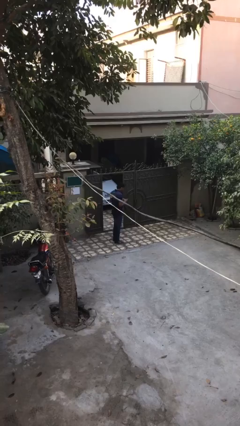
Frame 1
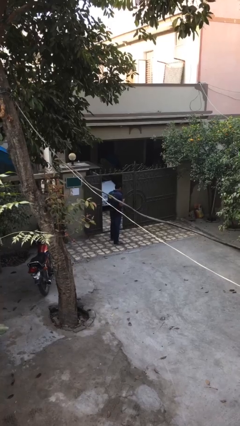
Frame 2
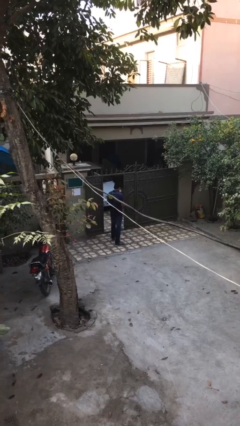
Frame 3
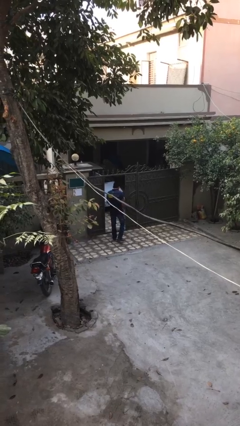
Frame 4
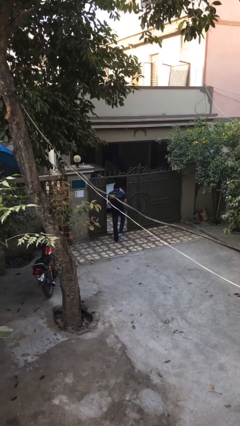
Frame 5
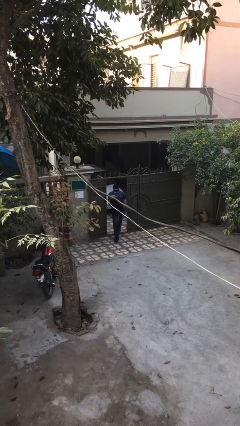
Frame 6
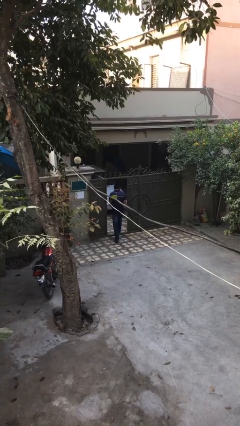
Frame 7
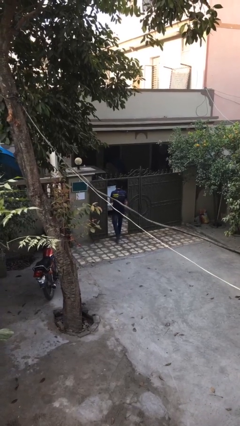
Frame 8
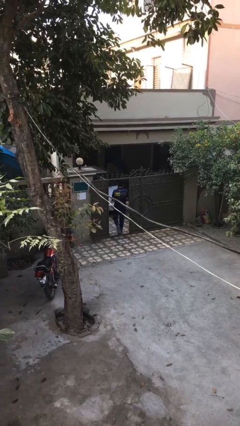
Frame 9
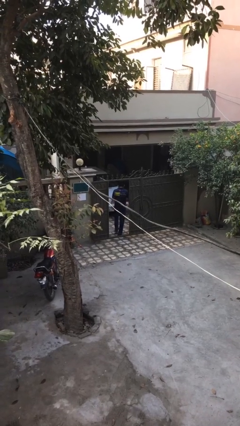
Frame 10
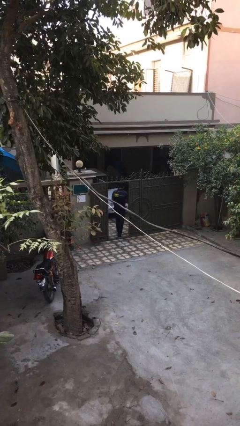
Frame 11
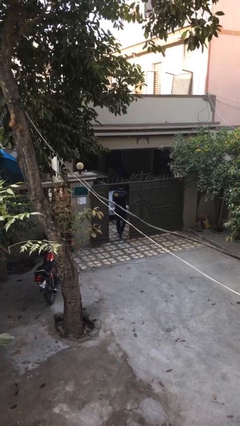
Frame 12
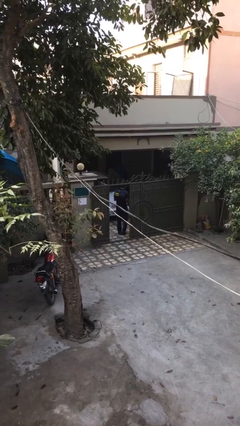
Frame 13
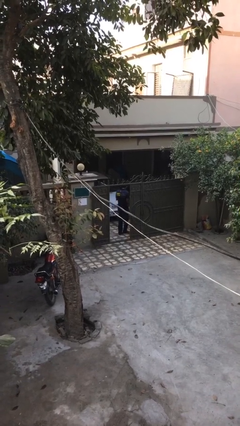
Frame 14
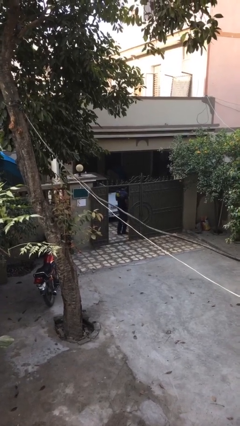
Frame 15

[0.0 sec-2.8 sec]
person exits scene through structure

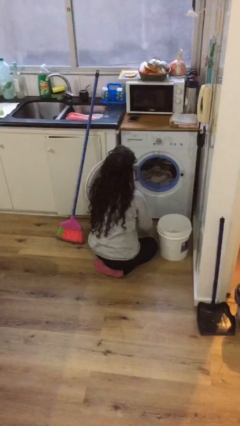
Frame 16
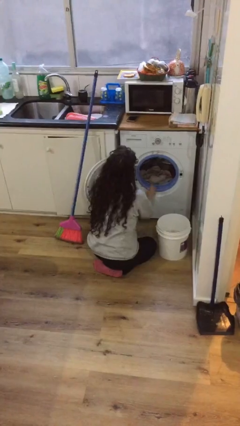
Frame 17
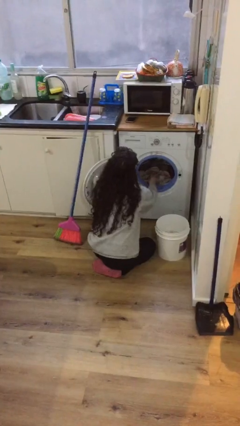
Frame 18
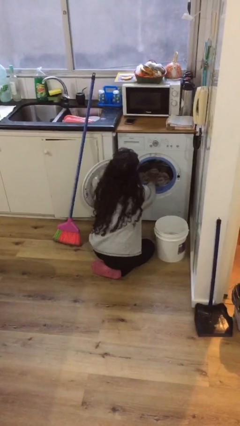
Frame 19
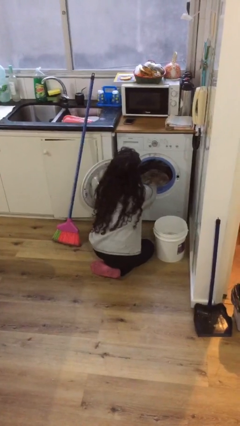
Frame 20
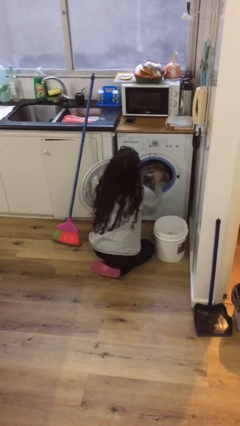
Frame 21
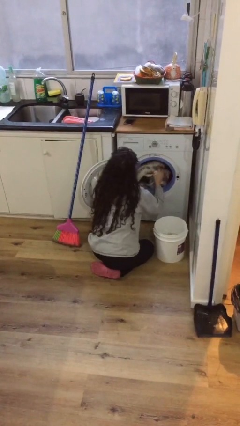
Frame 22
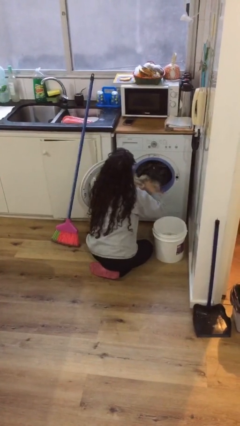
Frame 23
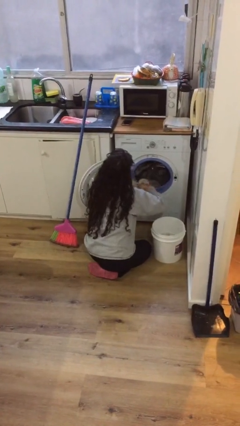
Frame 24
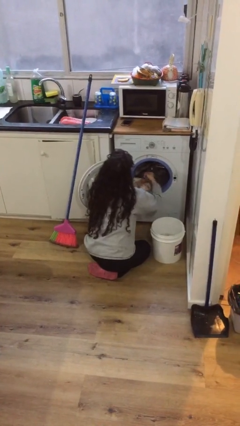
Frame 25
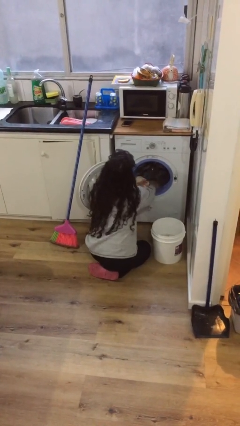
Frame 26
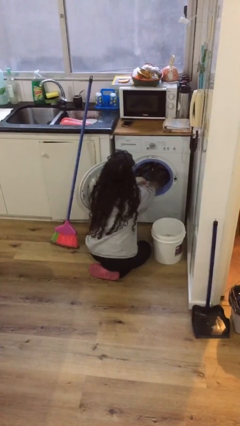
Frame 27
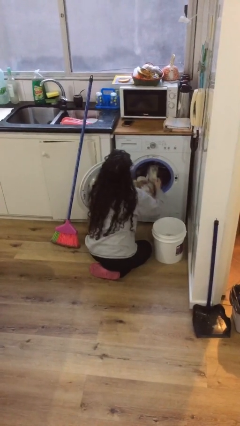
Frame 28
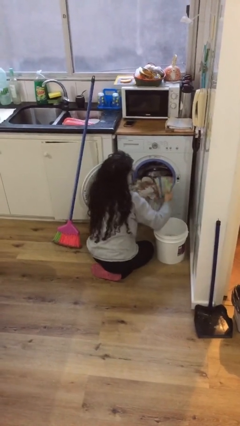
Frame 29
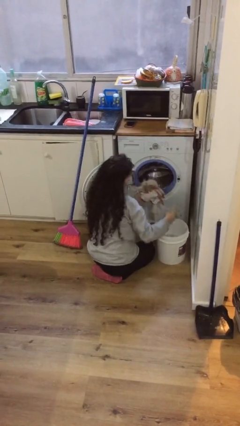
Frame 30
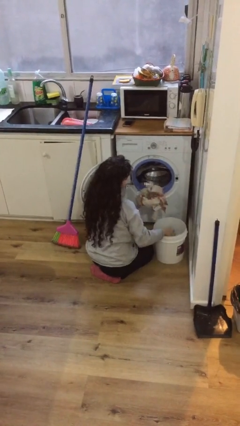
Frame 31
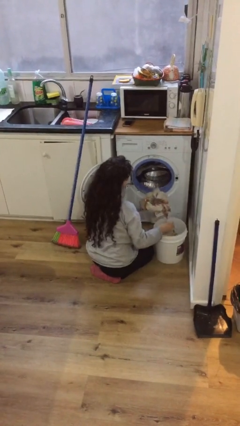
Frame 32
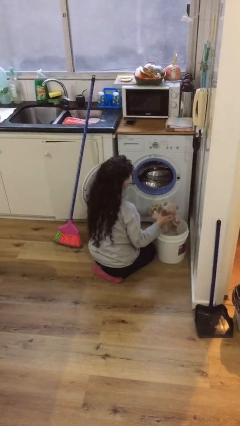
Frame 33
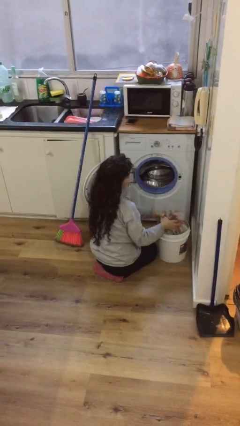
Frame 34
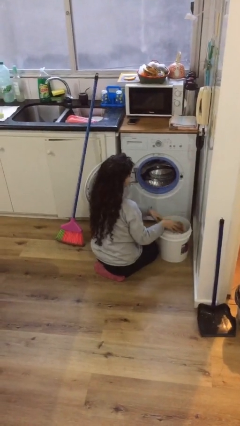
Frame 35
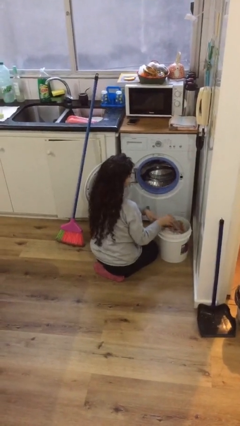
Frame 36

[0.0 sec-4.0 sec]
person unloads clotheswasher

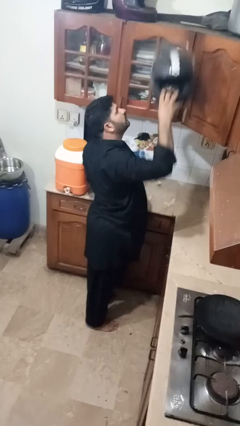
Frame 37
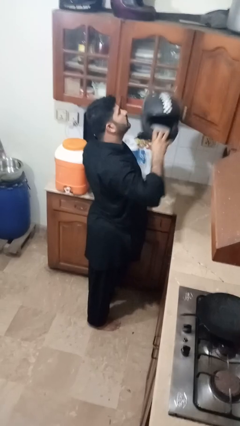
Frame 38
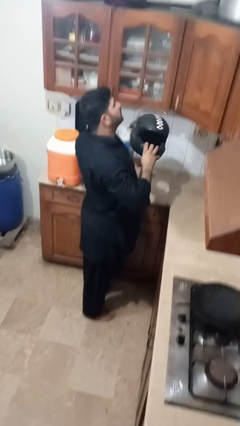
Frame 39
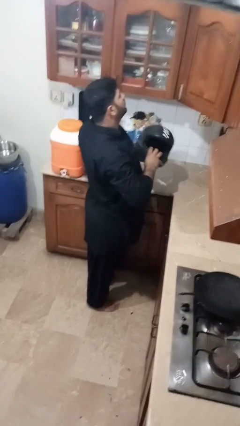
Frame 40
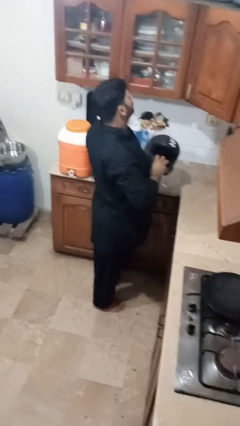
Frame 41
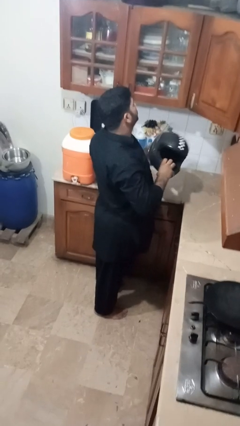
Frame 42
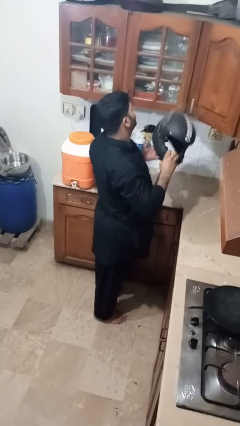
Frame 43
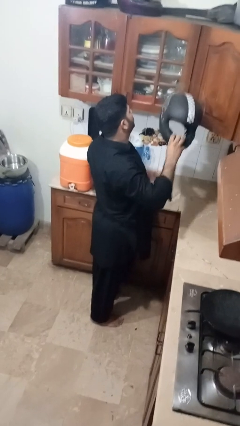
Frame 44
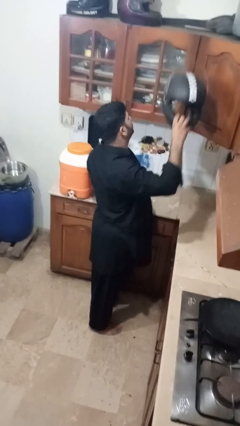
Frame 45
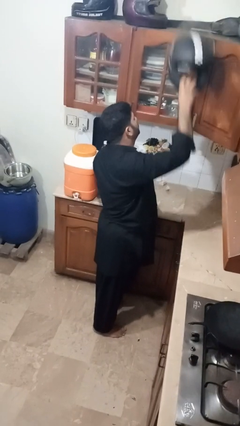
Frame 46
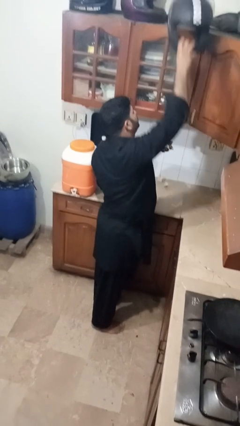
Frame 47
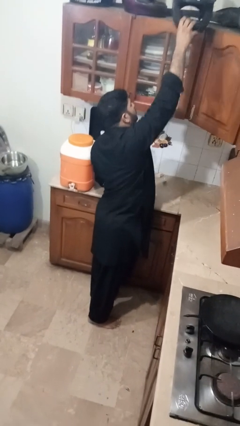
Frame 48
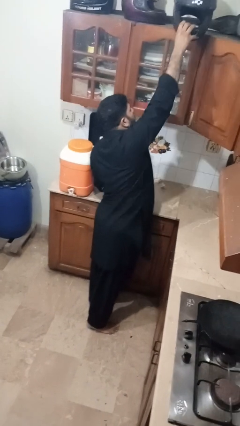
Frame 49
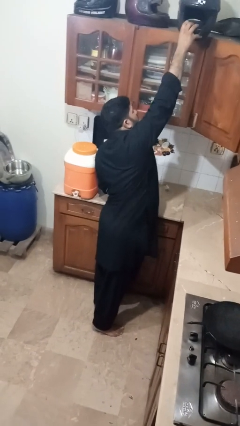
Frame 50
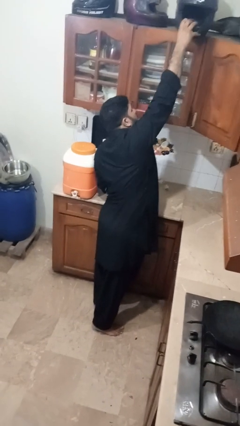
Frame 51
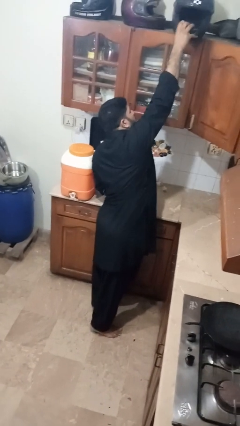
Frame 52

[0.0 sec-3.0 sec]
person puts down object on shelf

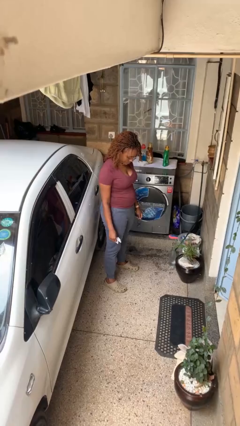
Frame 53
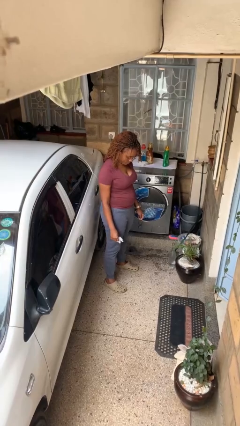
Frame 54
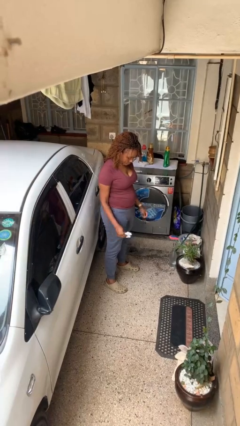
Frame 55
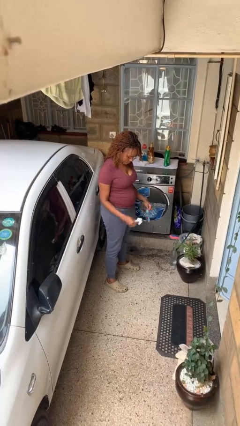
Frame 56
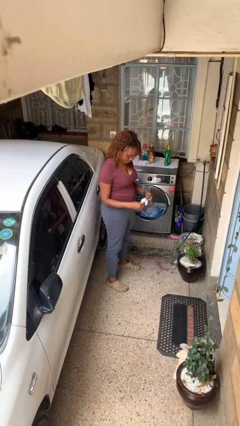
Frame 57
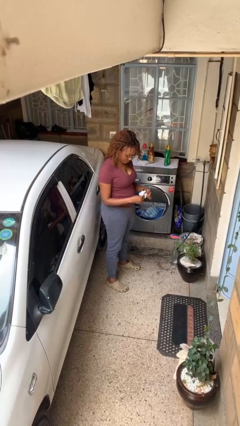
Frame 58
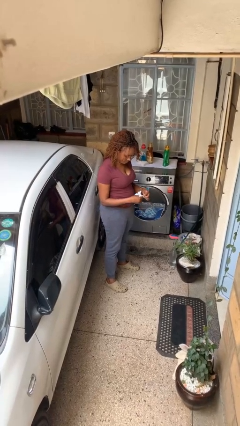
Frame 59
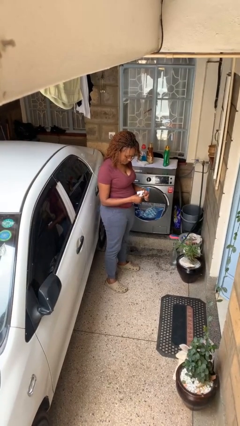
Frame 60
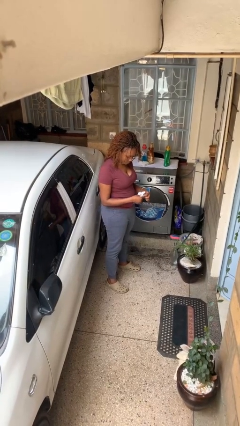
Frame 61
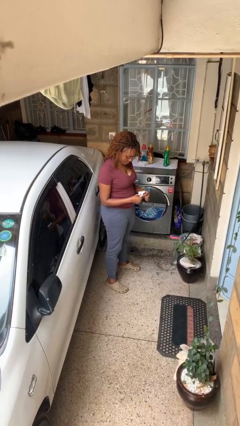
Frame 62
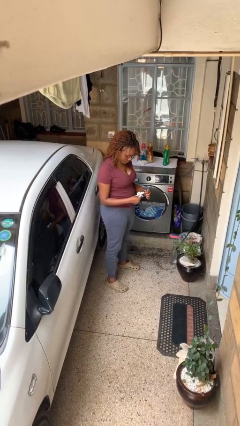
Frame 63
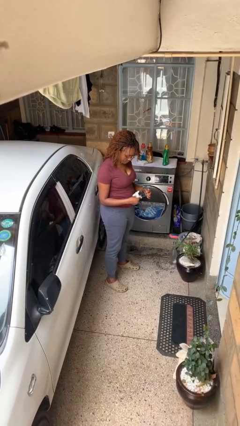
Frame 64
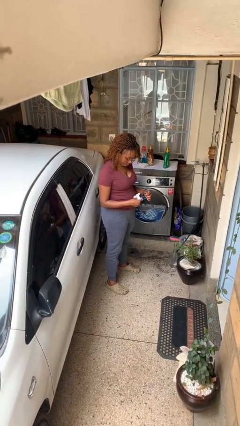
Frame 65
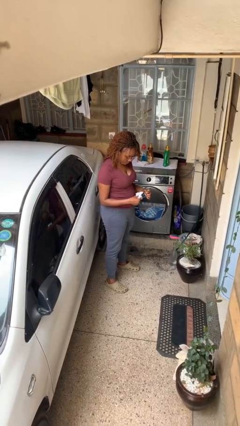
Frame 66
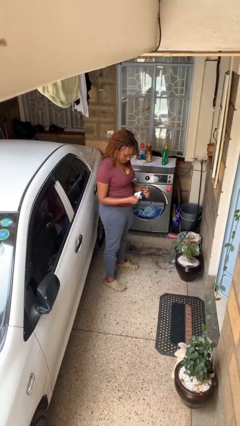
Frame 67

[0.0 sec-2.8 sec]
person cleans eyeglasses

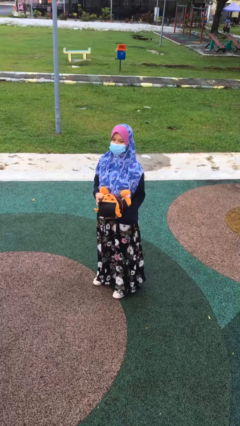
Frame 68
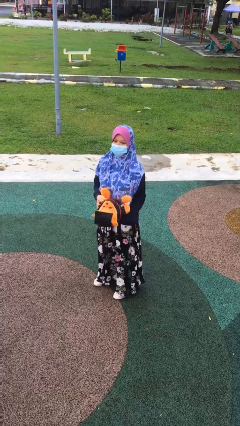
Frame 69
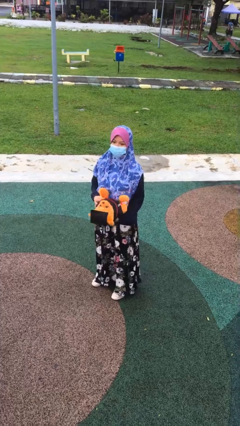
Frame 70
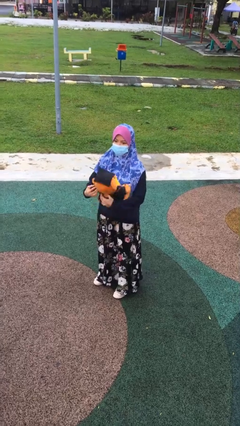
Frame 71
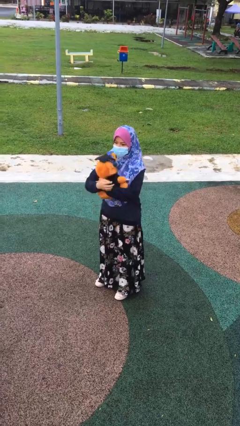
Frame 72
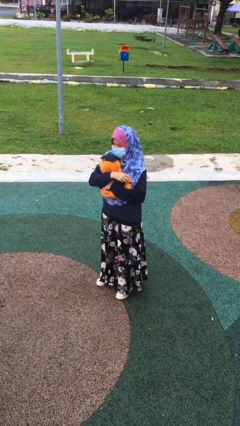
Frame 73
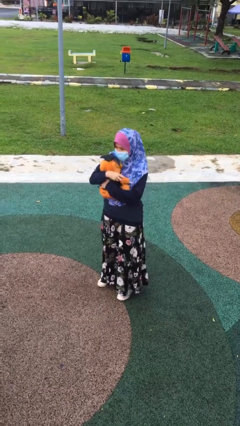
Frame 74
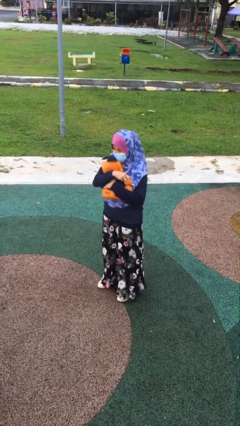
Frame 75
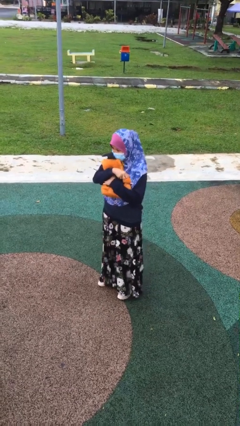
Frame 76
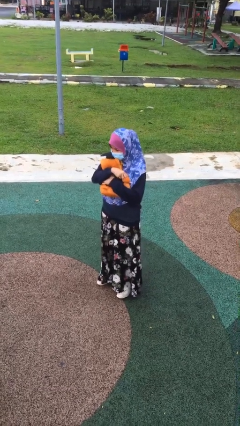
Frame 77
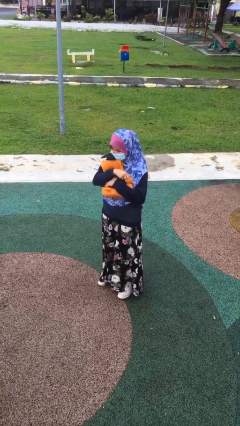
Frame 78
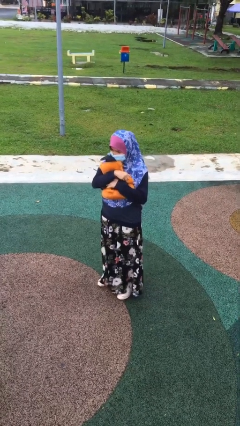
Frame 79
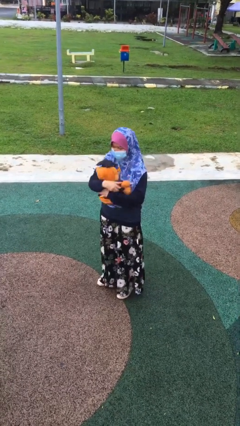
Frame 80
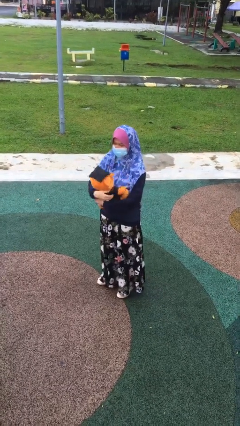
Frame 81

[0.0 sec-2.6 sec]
person hugs stuffed animal

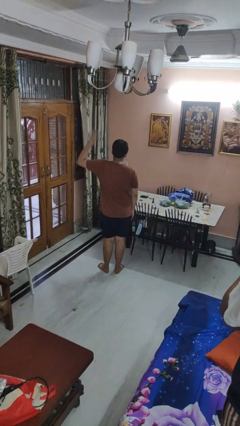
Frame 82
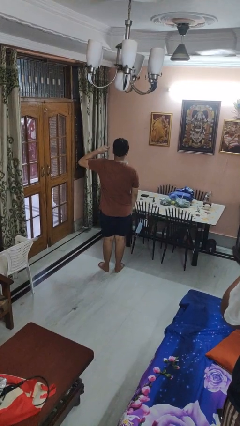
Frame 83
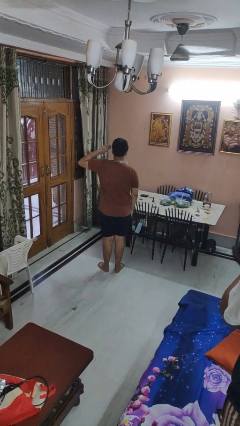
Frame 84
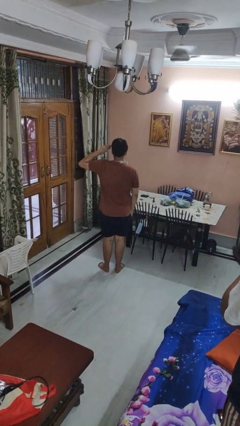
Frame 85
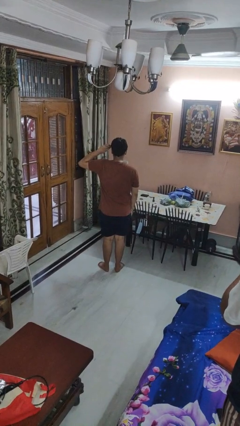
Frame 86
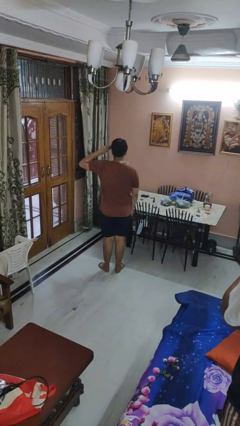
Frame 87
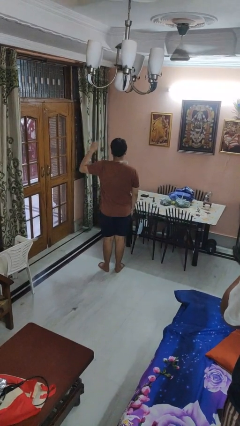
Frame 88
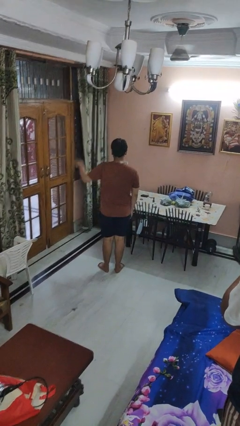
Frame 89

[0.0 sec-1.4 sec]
person salutes

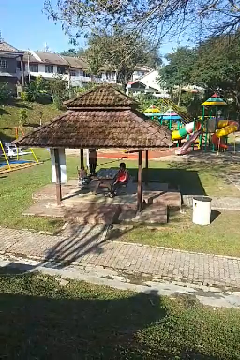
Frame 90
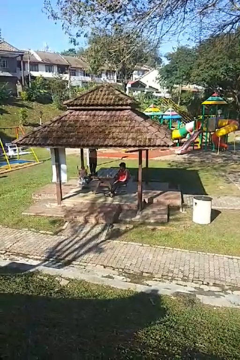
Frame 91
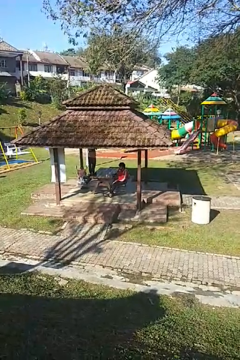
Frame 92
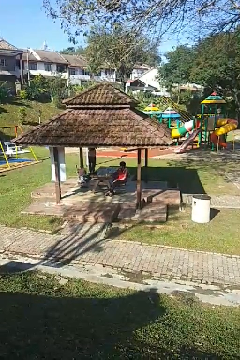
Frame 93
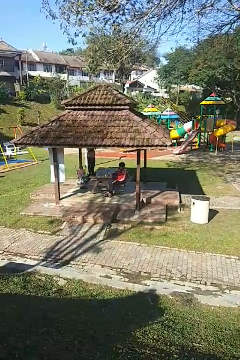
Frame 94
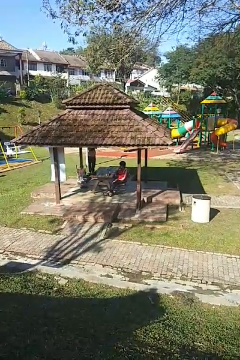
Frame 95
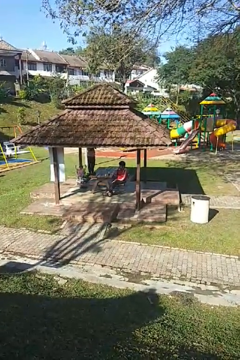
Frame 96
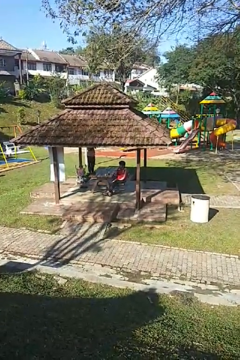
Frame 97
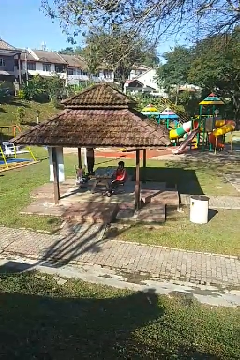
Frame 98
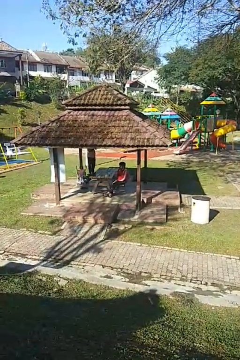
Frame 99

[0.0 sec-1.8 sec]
person picks up object from table
